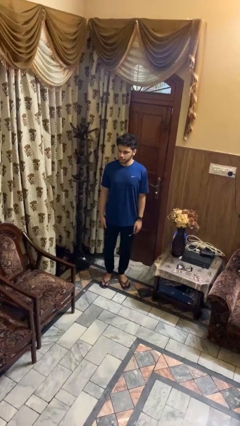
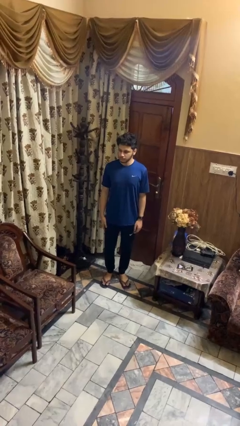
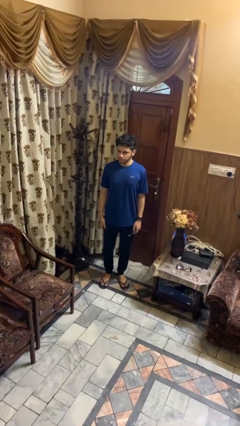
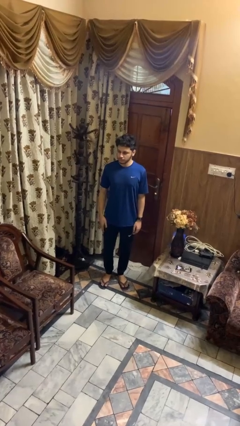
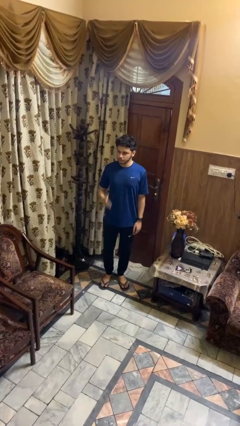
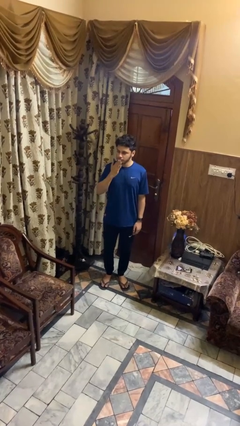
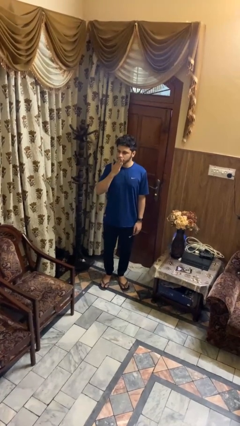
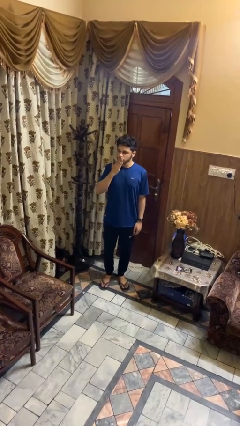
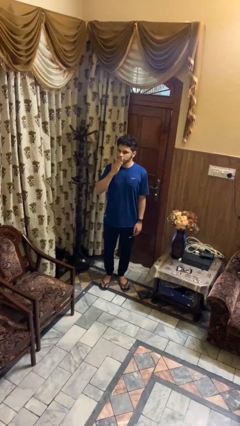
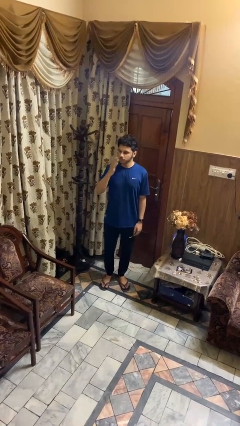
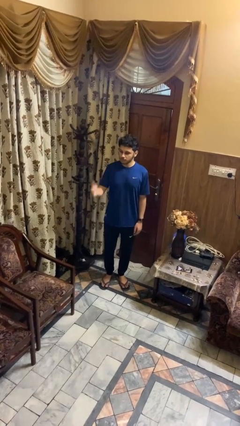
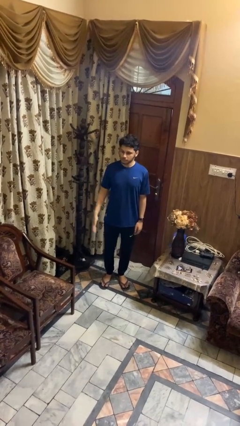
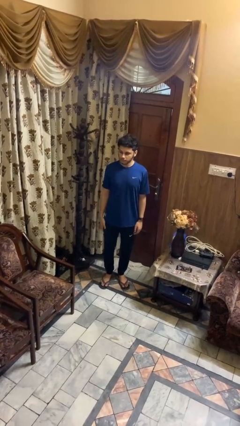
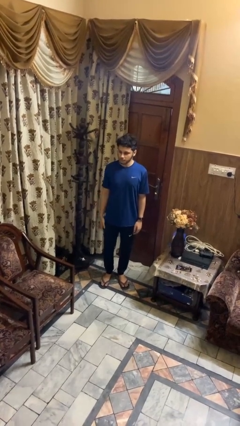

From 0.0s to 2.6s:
person gestures blow kiss

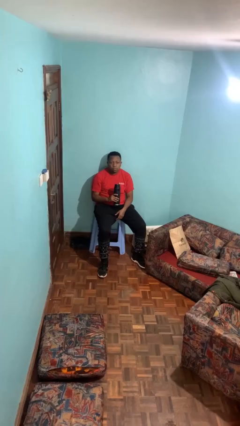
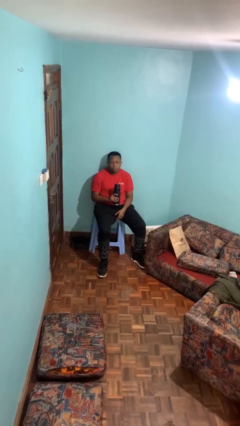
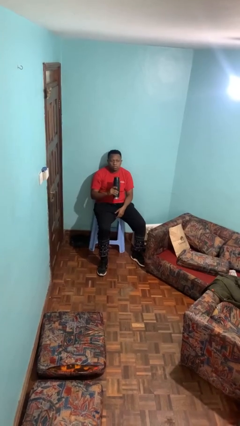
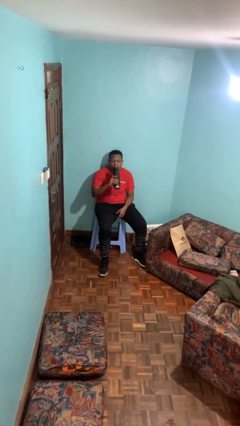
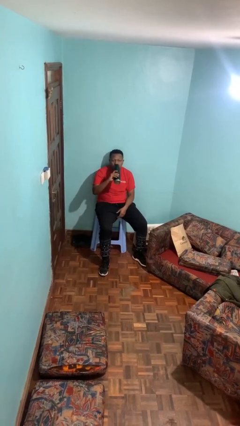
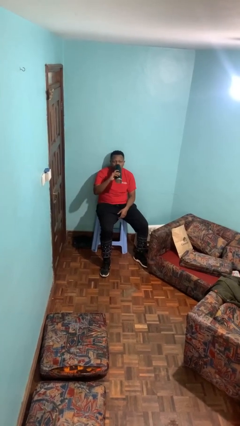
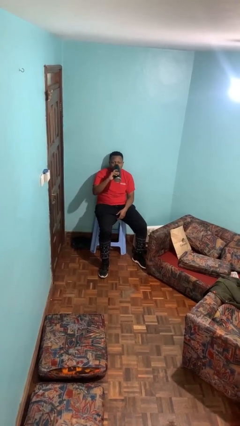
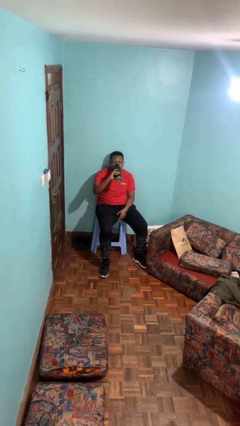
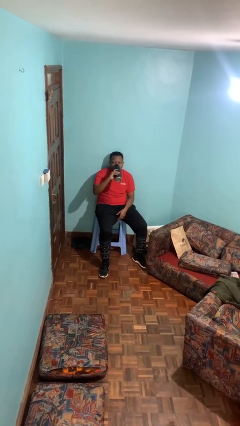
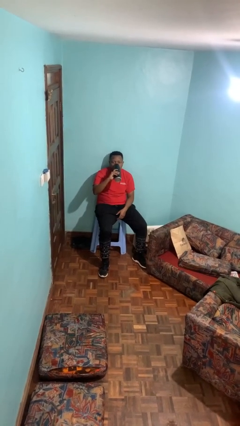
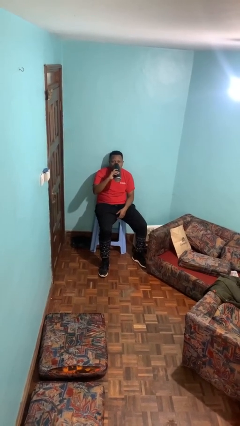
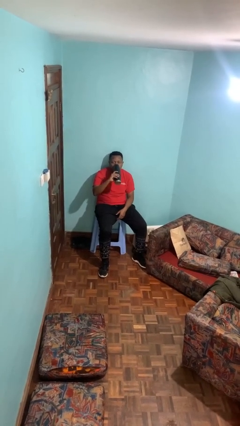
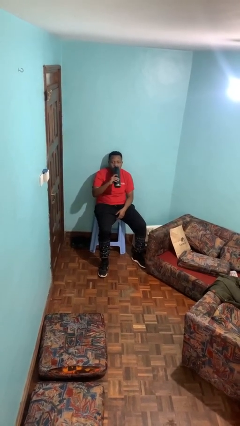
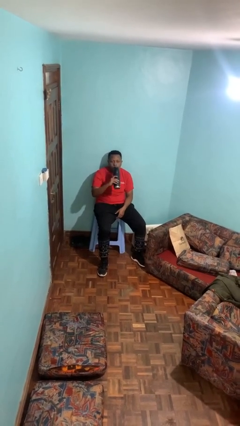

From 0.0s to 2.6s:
person drinks from bottle

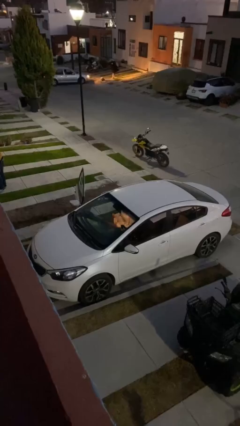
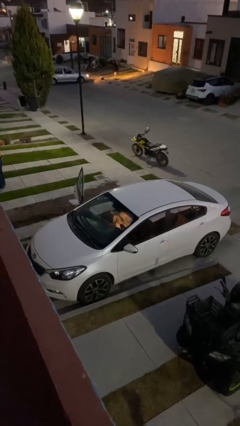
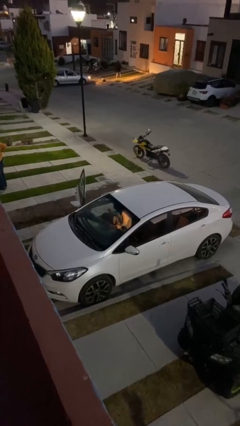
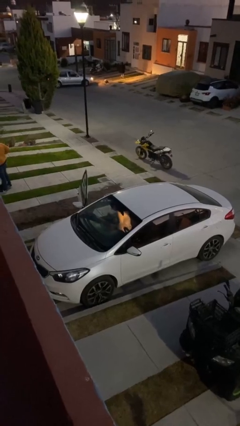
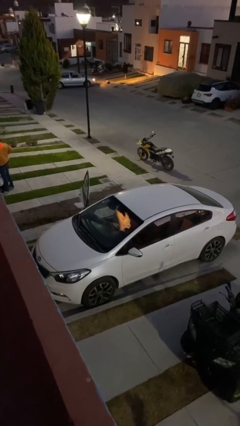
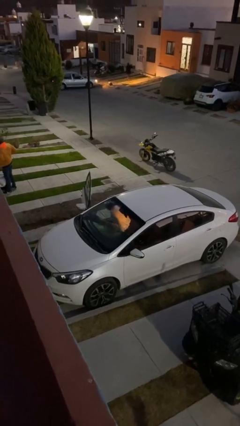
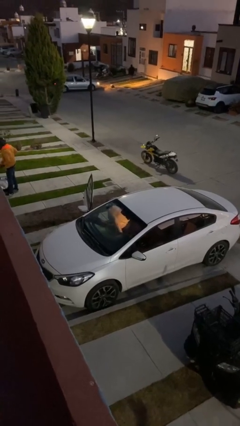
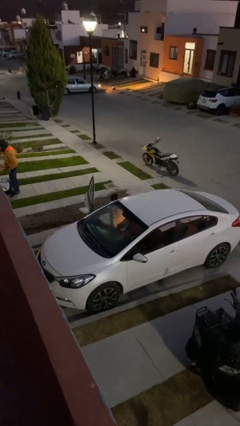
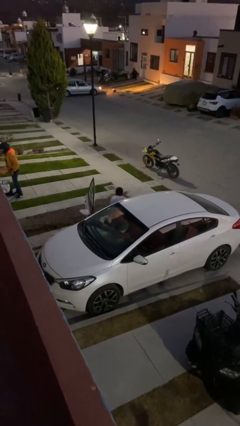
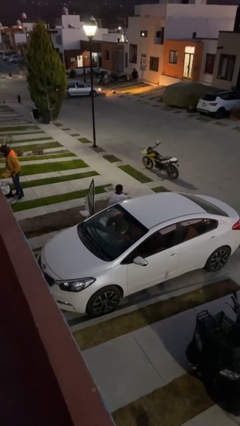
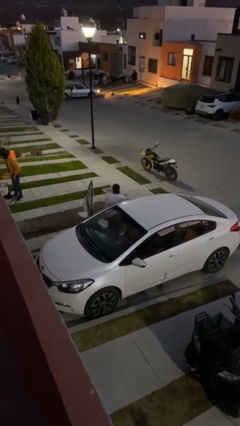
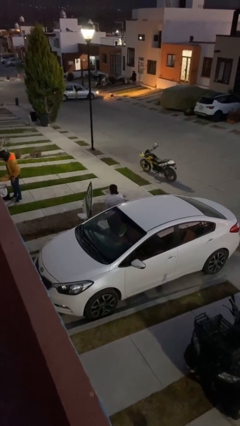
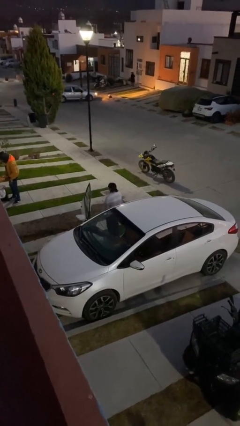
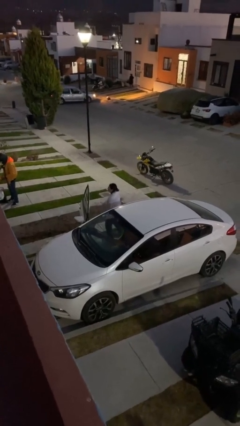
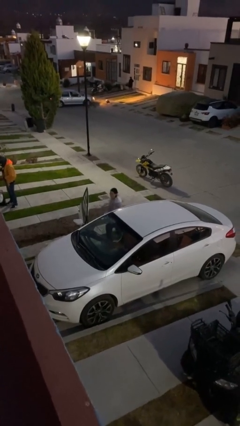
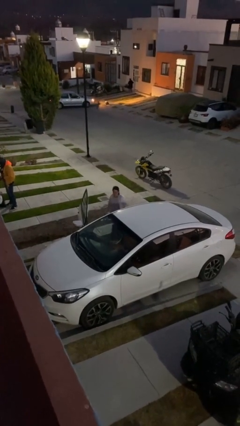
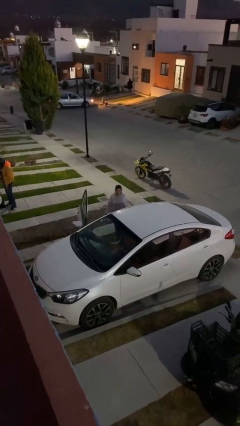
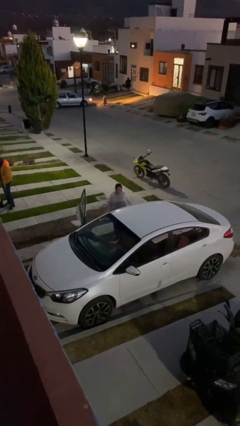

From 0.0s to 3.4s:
person exits car

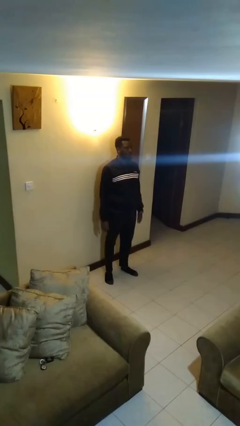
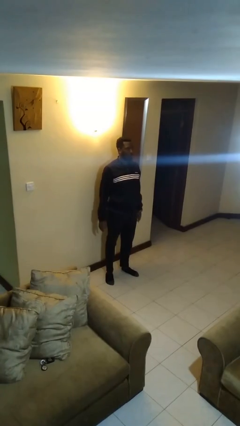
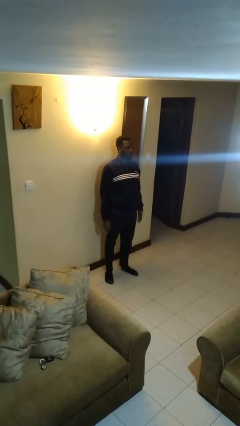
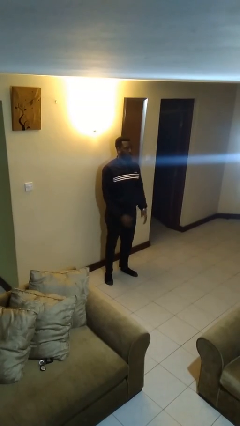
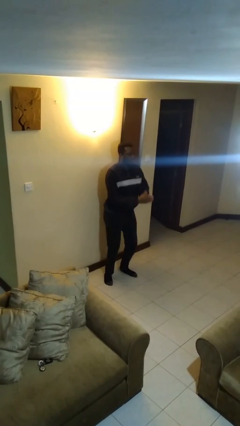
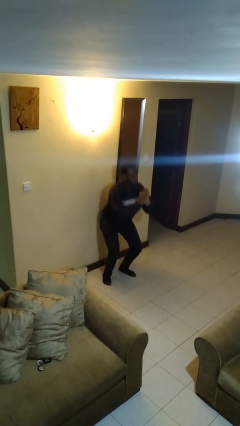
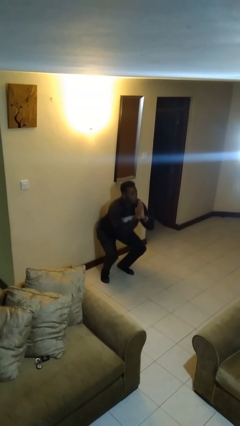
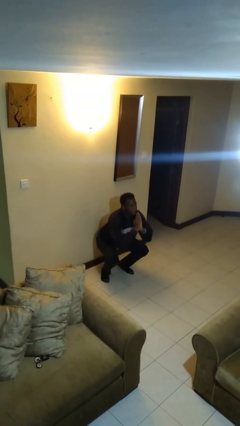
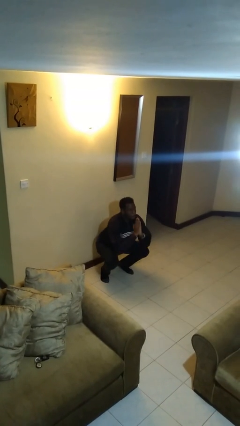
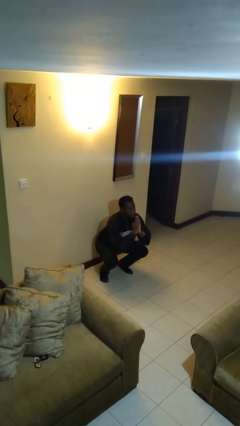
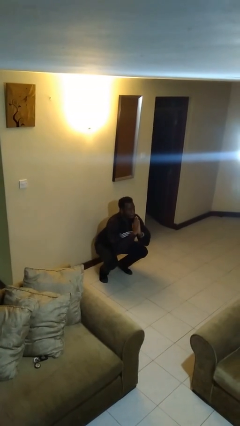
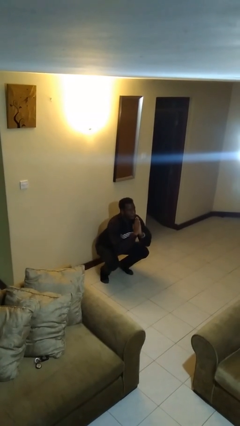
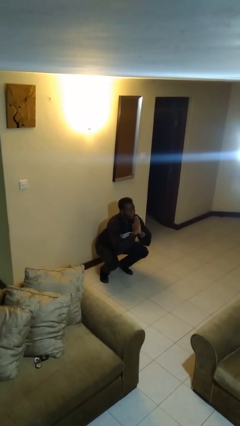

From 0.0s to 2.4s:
person squats

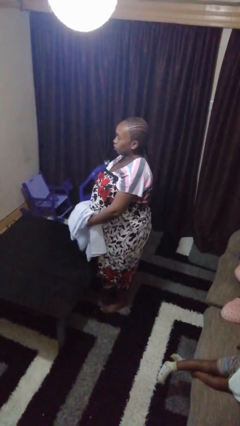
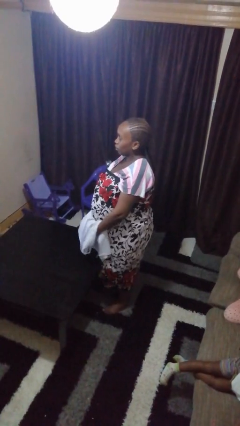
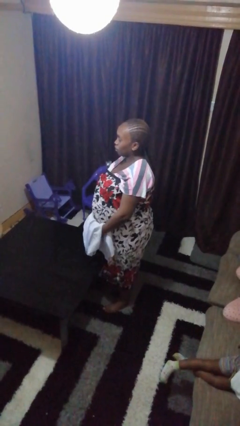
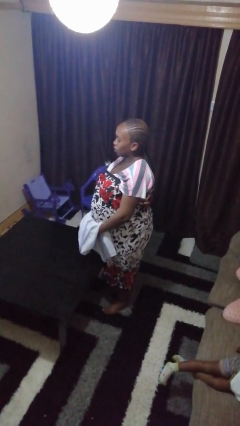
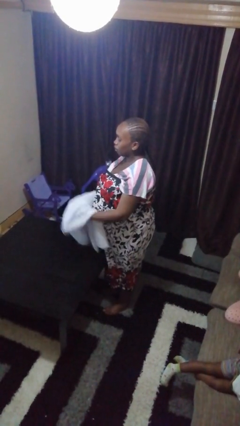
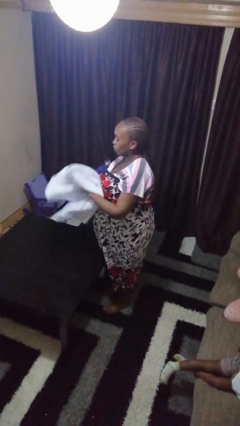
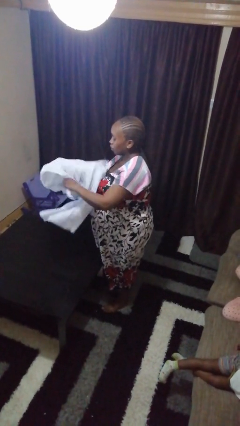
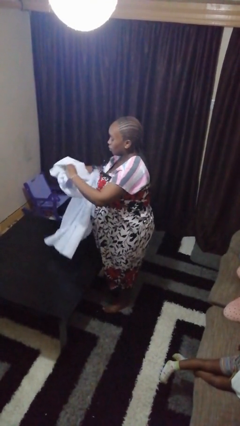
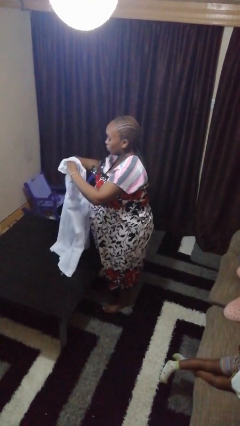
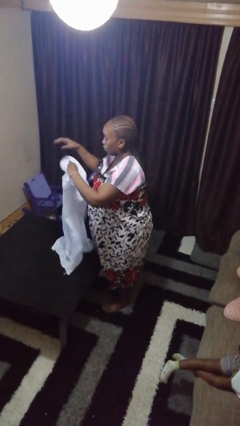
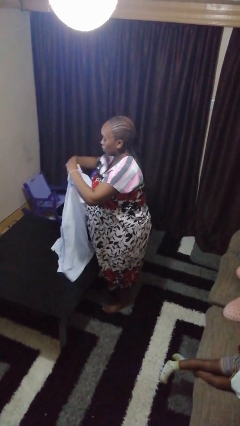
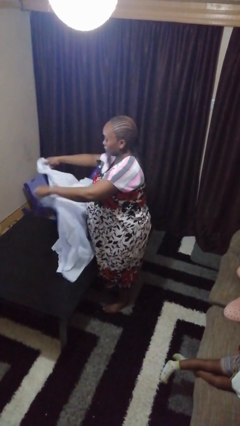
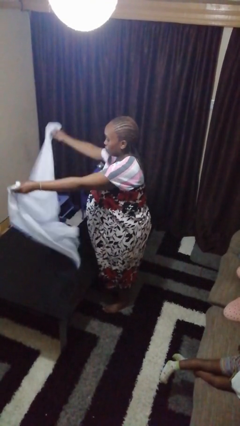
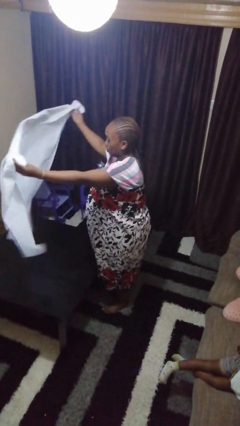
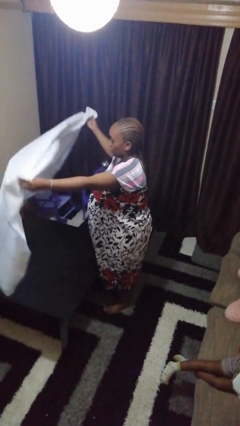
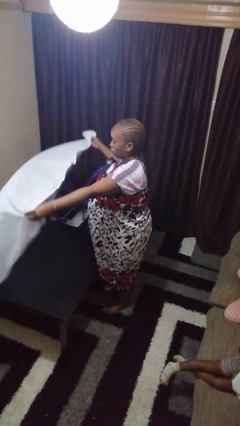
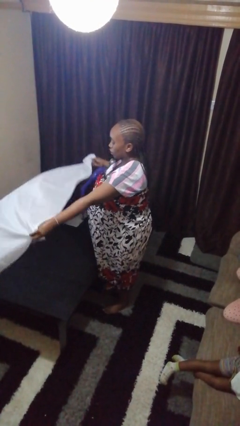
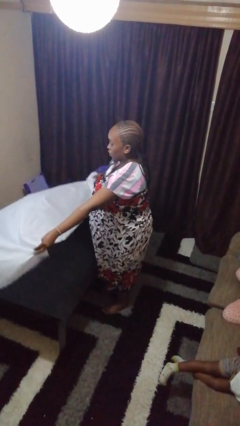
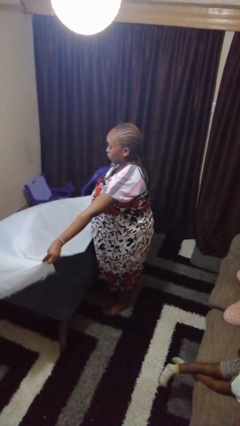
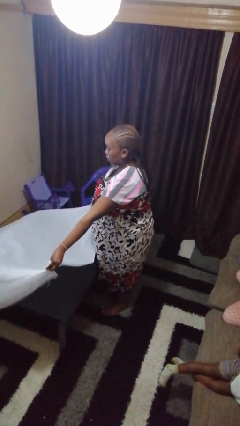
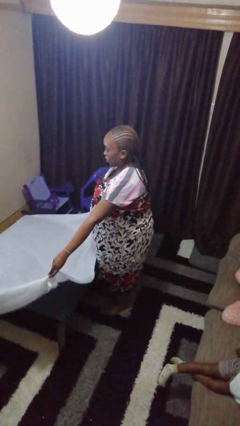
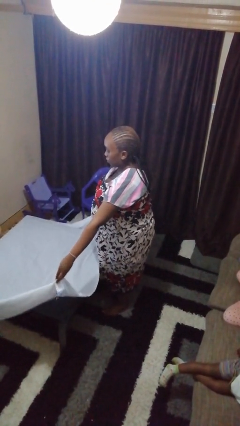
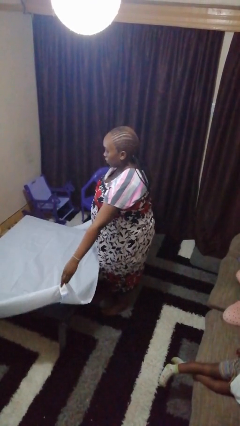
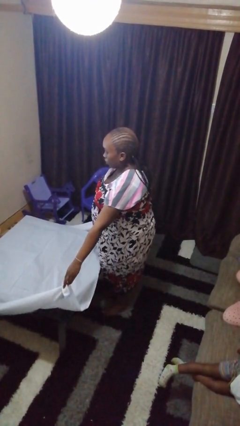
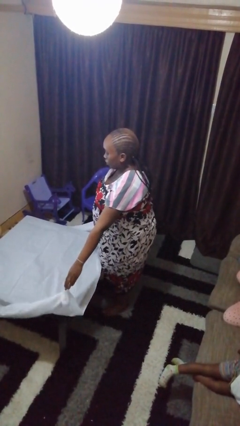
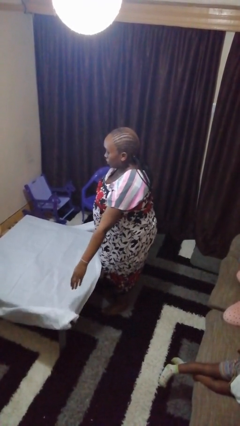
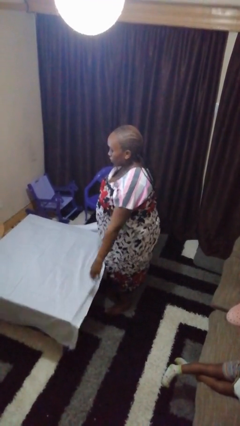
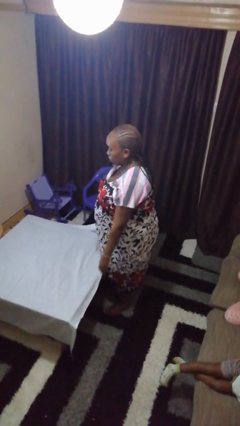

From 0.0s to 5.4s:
person spreads tablecloth

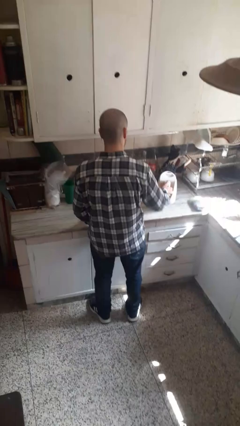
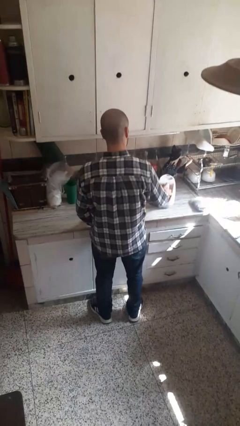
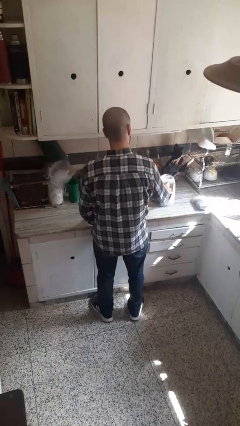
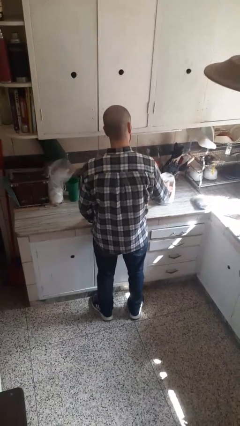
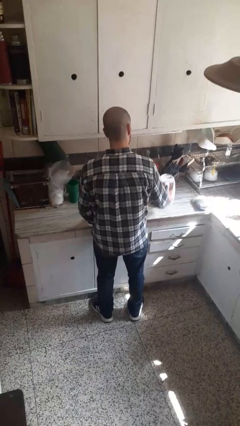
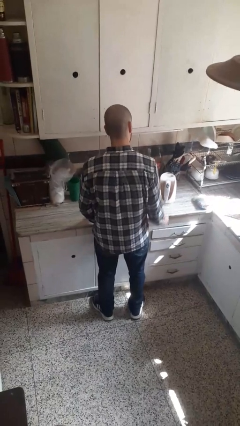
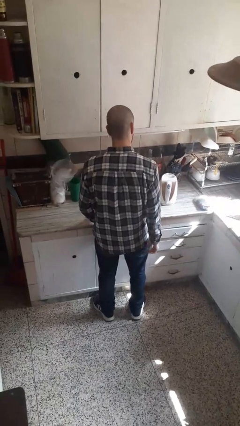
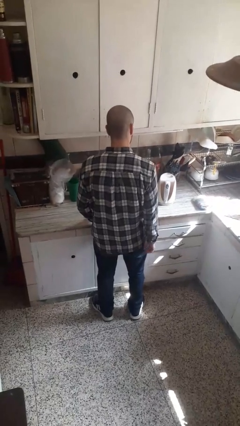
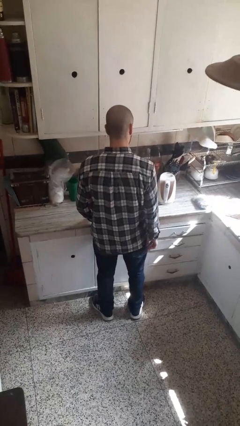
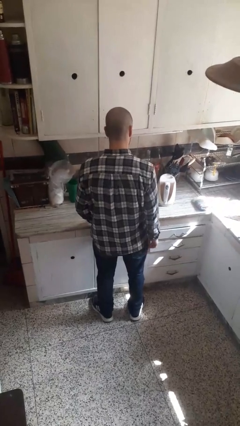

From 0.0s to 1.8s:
person puts down object on countertop
